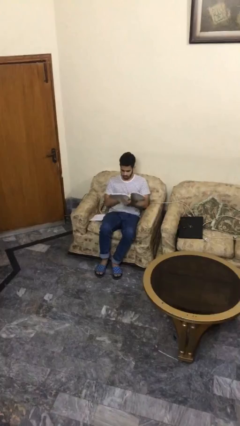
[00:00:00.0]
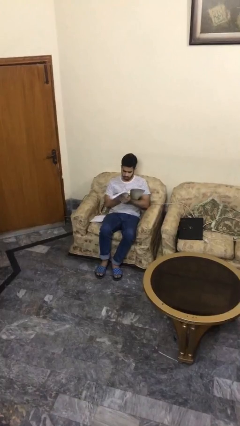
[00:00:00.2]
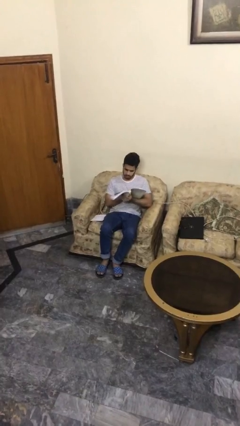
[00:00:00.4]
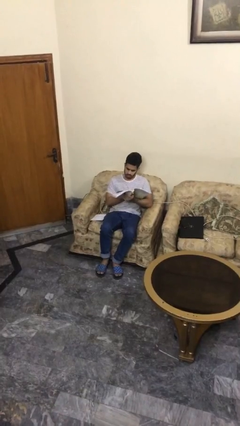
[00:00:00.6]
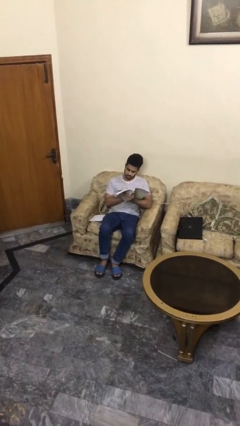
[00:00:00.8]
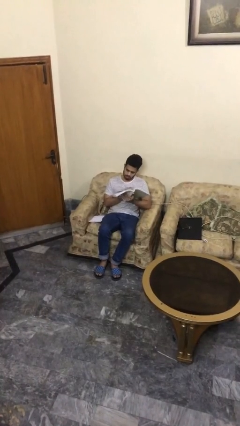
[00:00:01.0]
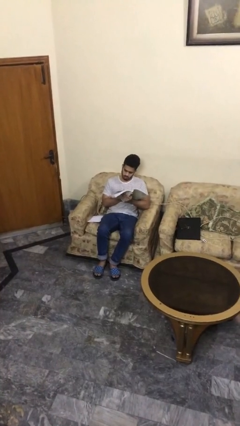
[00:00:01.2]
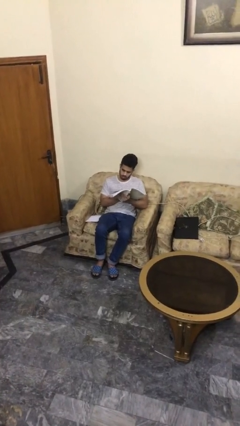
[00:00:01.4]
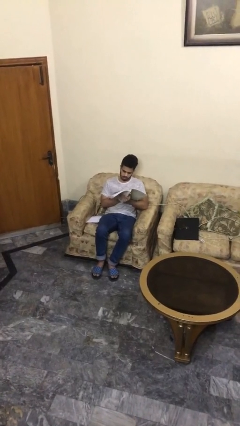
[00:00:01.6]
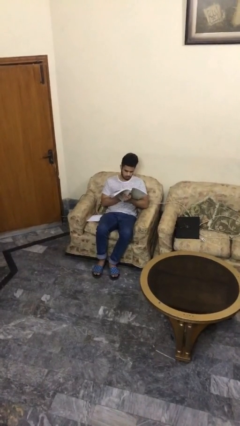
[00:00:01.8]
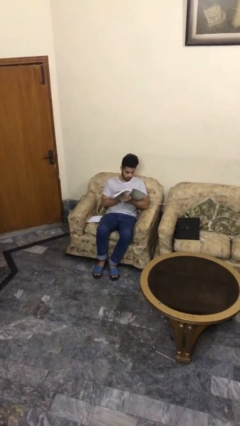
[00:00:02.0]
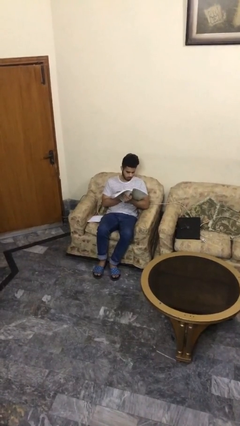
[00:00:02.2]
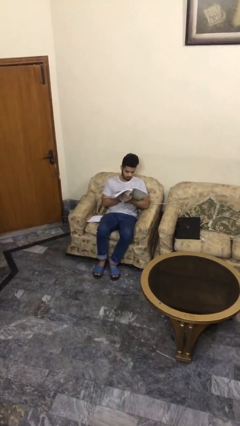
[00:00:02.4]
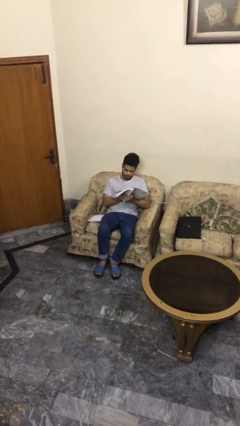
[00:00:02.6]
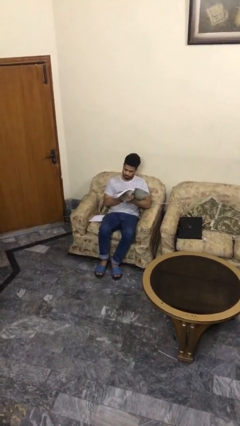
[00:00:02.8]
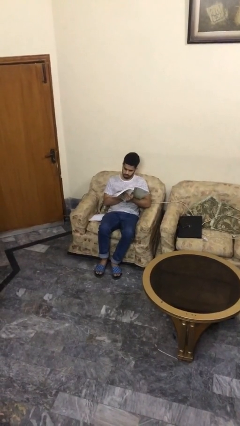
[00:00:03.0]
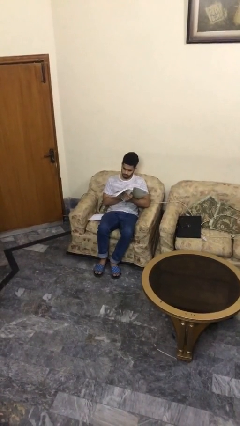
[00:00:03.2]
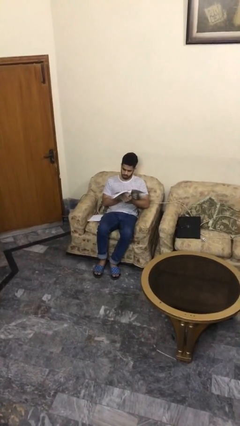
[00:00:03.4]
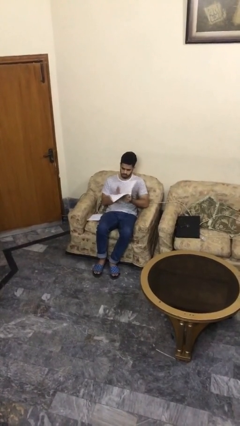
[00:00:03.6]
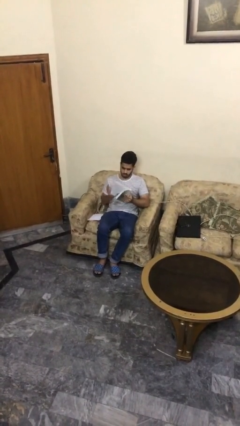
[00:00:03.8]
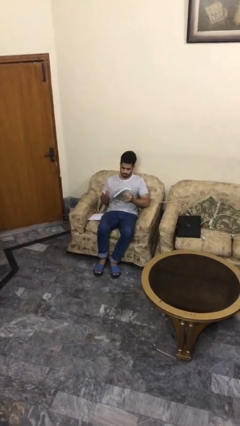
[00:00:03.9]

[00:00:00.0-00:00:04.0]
person reads document

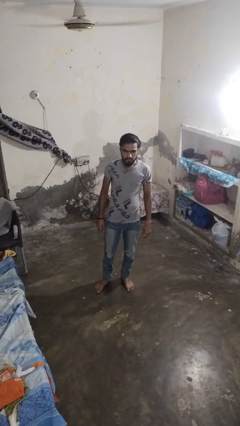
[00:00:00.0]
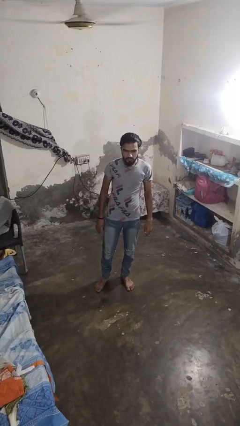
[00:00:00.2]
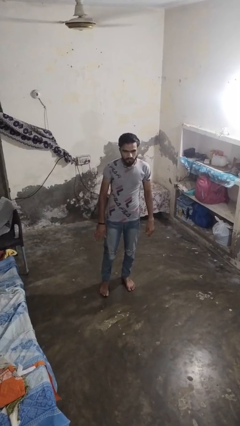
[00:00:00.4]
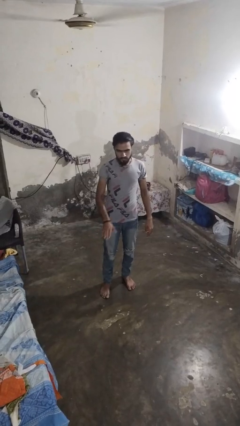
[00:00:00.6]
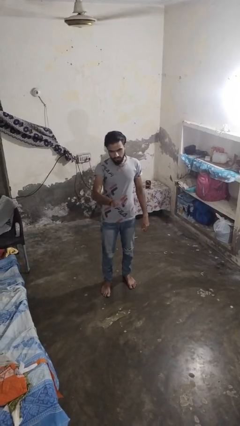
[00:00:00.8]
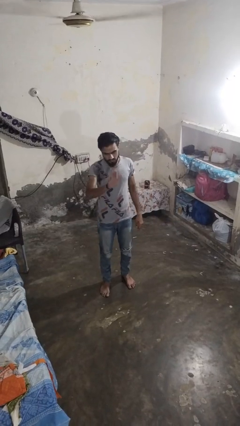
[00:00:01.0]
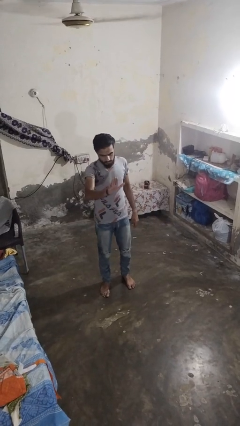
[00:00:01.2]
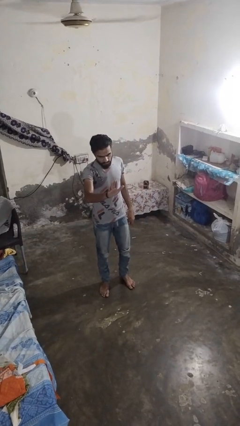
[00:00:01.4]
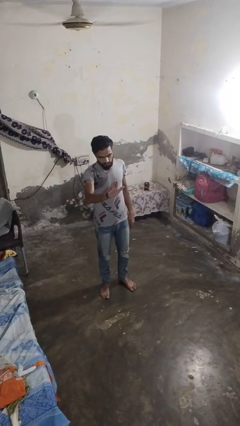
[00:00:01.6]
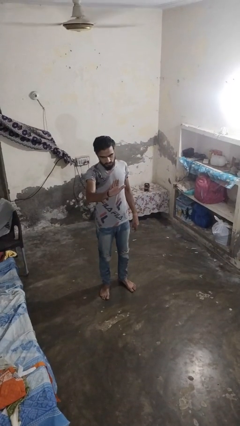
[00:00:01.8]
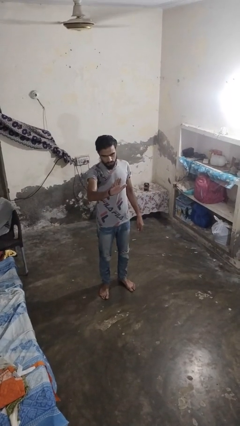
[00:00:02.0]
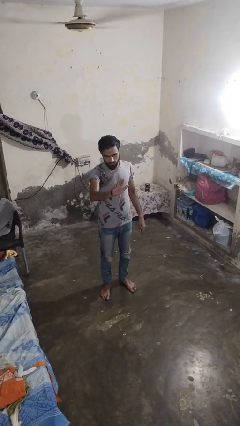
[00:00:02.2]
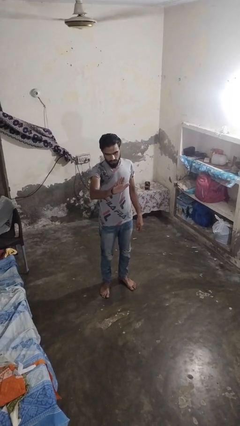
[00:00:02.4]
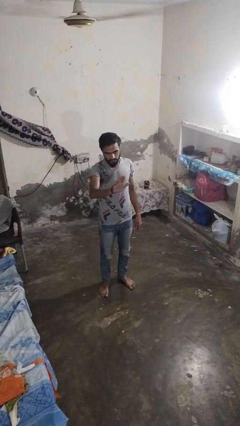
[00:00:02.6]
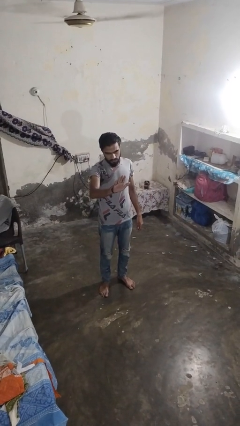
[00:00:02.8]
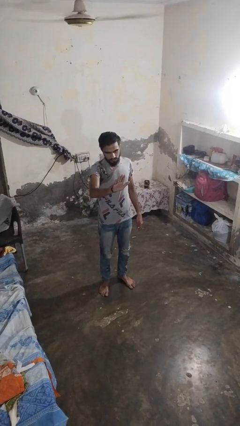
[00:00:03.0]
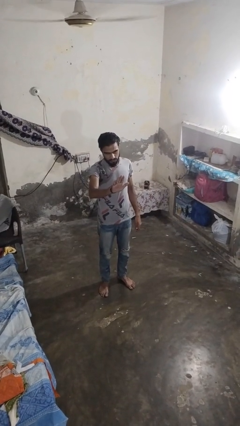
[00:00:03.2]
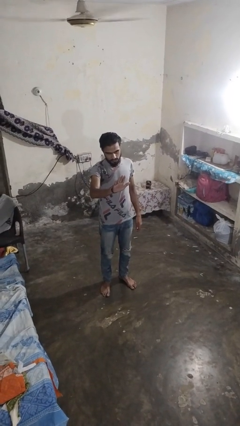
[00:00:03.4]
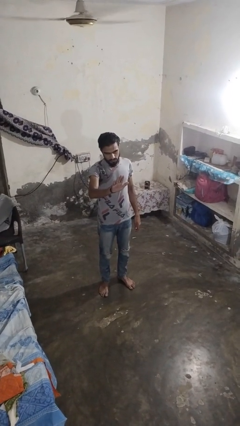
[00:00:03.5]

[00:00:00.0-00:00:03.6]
person gestures stop

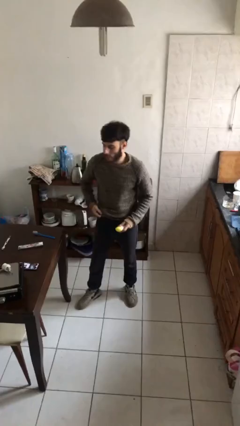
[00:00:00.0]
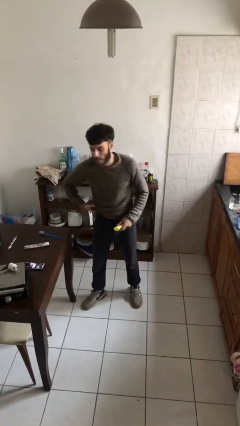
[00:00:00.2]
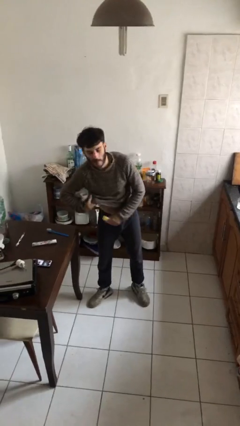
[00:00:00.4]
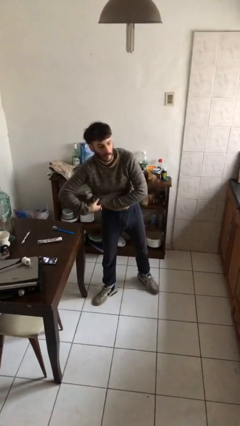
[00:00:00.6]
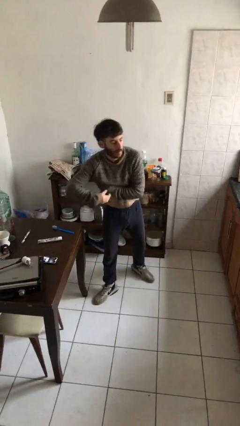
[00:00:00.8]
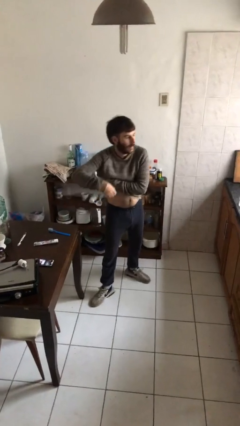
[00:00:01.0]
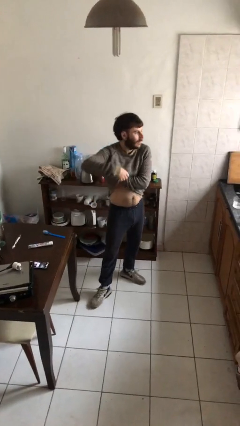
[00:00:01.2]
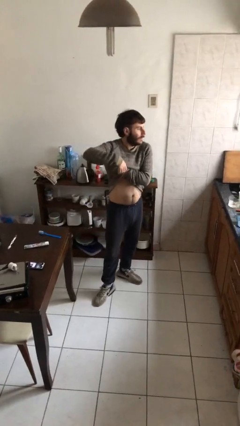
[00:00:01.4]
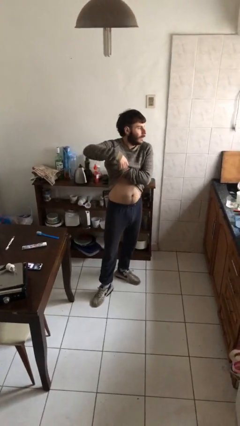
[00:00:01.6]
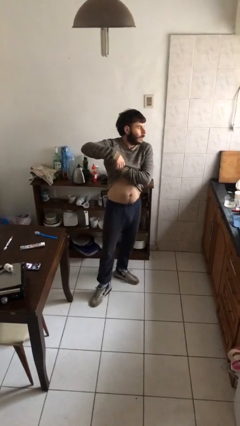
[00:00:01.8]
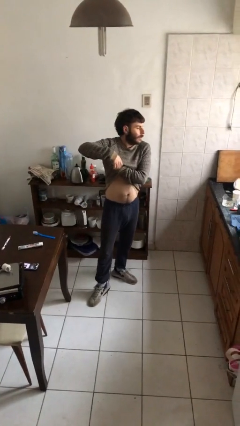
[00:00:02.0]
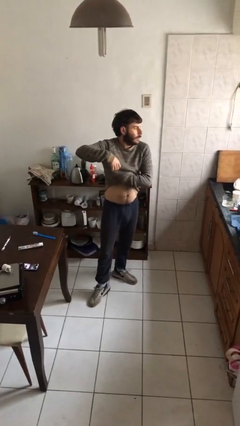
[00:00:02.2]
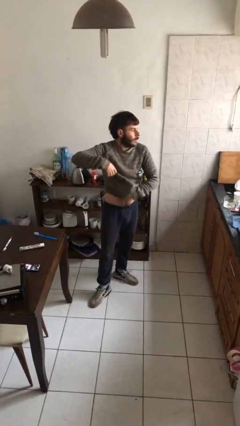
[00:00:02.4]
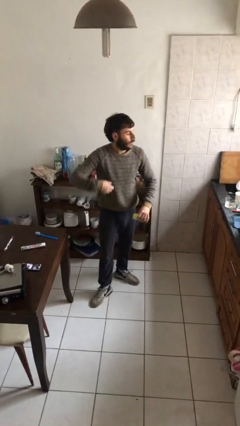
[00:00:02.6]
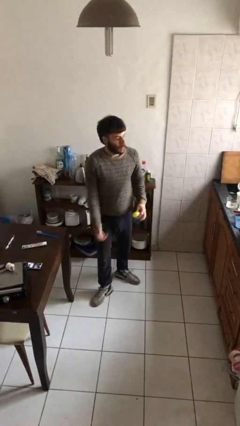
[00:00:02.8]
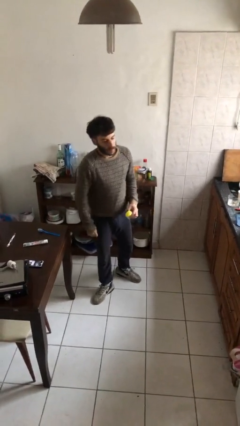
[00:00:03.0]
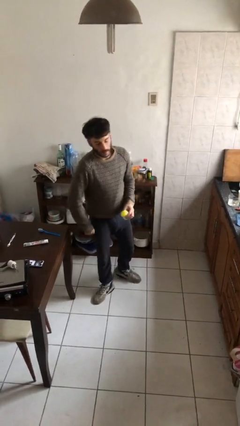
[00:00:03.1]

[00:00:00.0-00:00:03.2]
person applies deodorant

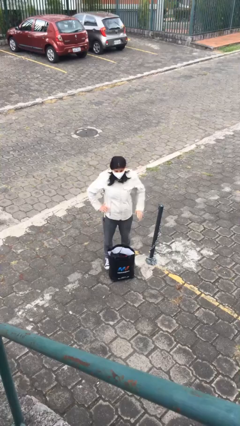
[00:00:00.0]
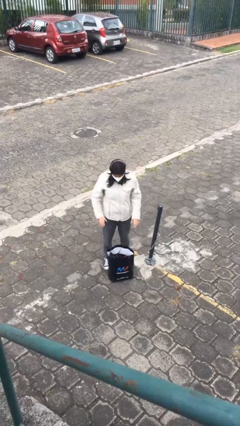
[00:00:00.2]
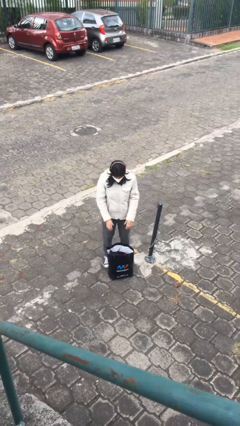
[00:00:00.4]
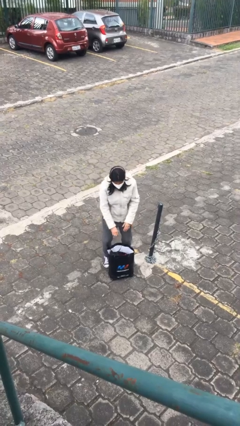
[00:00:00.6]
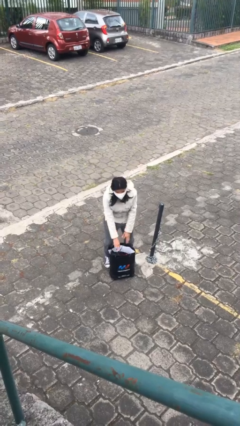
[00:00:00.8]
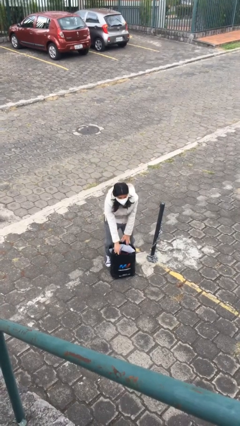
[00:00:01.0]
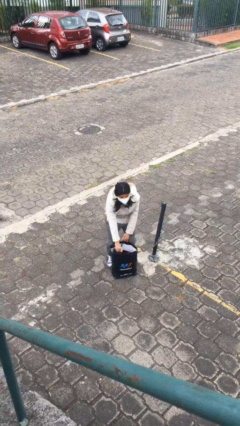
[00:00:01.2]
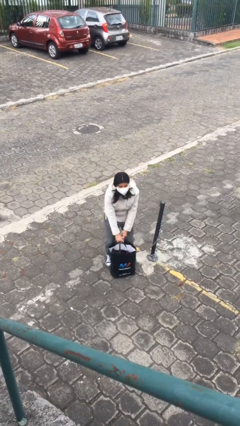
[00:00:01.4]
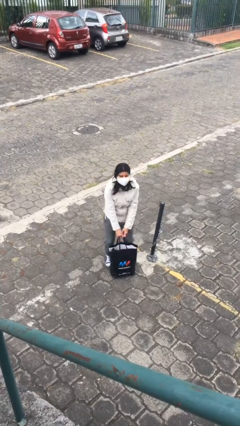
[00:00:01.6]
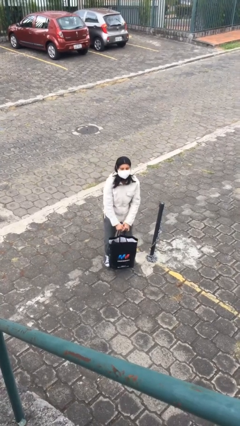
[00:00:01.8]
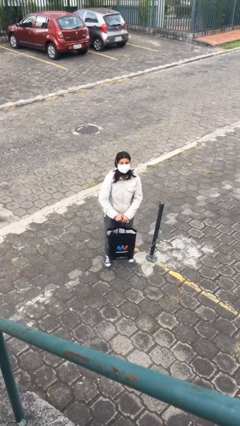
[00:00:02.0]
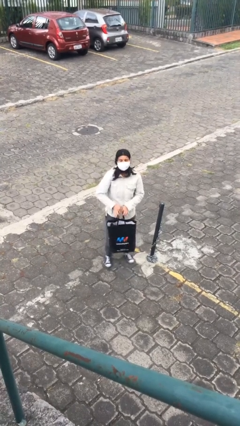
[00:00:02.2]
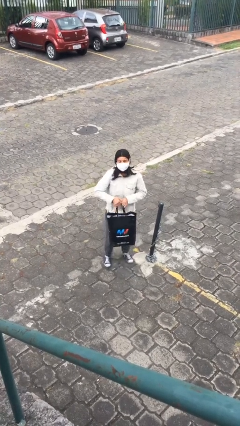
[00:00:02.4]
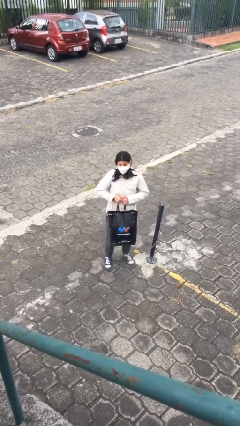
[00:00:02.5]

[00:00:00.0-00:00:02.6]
person picks up object from floor

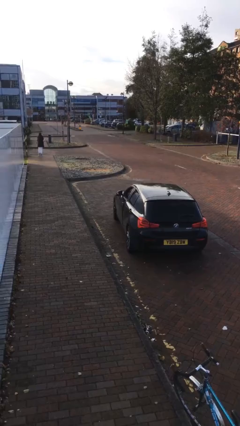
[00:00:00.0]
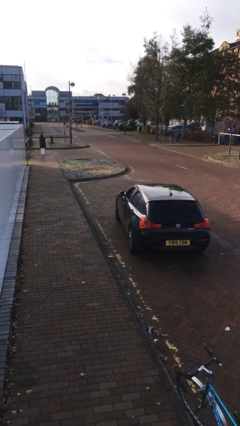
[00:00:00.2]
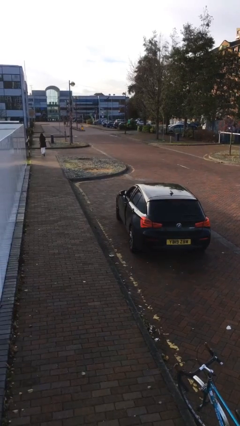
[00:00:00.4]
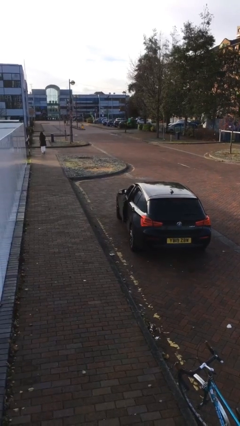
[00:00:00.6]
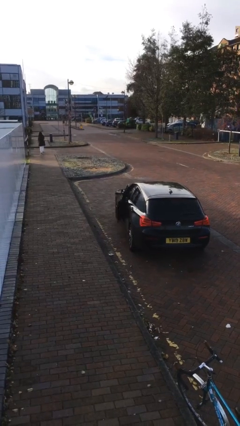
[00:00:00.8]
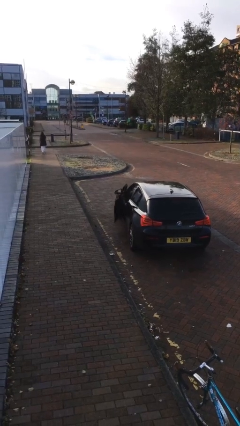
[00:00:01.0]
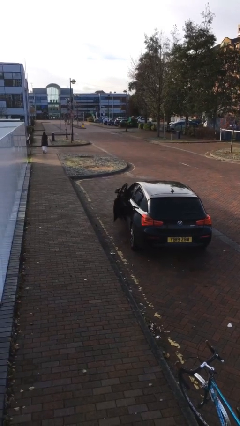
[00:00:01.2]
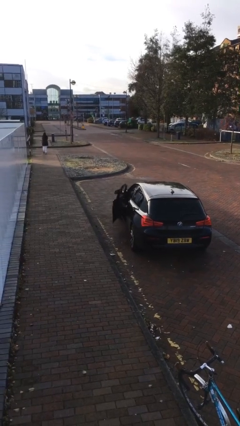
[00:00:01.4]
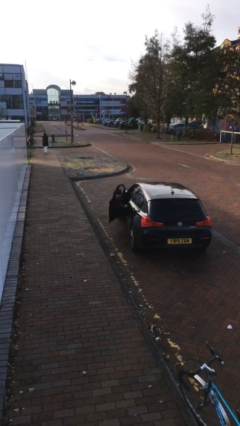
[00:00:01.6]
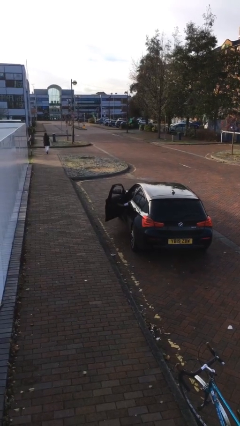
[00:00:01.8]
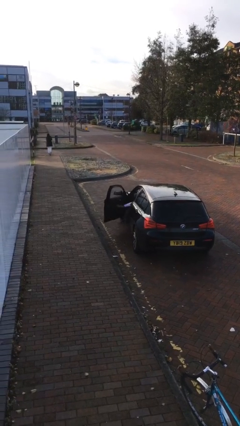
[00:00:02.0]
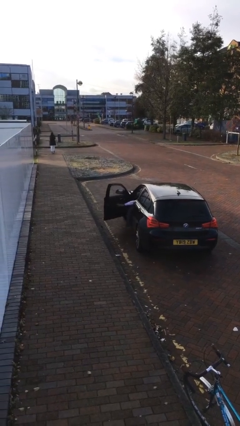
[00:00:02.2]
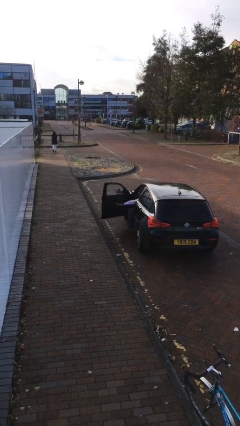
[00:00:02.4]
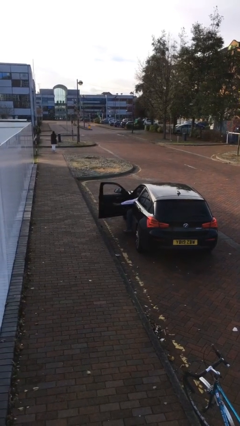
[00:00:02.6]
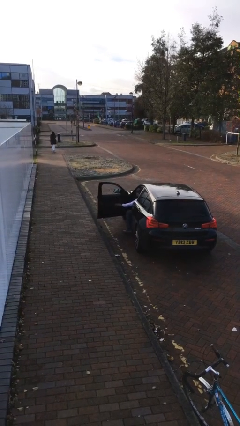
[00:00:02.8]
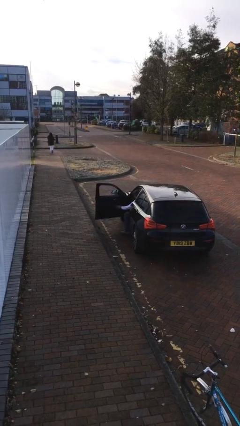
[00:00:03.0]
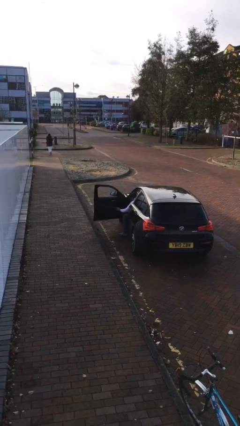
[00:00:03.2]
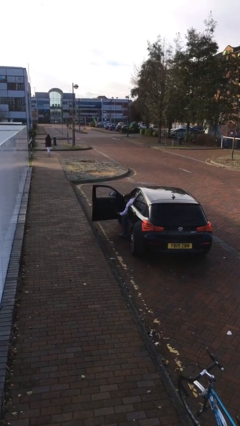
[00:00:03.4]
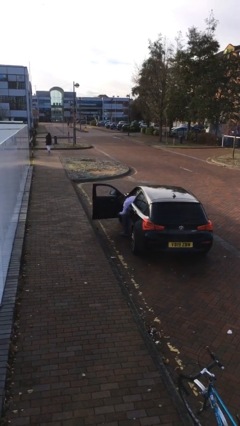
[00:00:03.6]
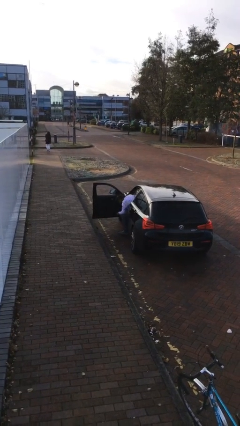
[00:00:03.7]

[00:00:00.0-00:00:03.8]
person opens car door
